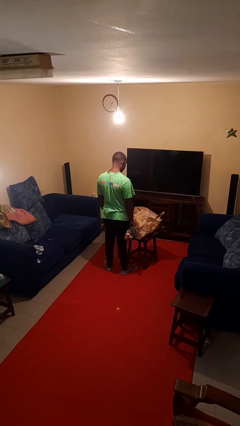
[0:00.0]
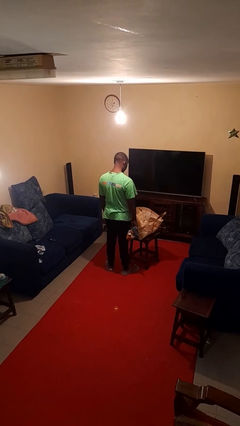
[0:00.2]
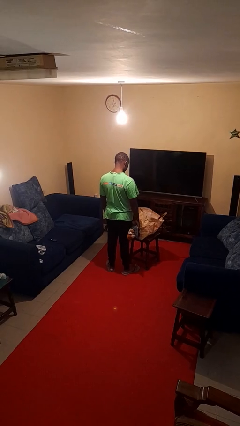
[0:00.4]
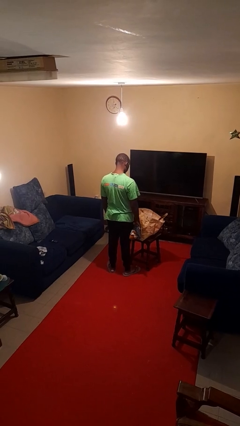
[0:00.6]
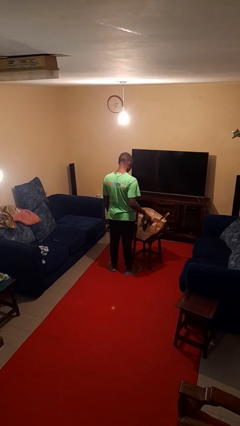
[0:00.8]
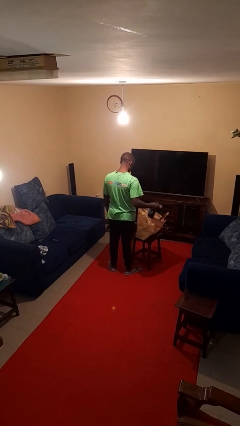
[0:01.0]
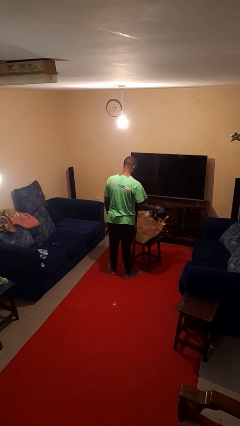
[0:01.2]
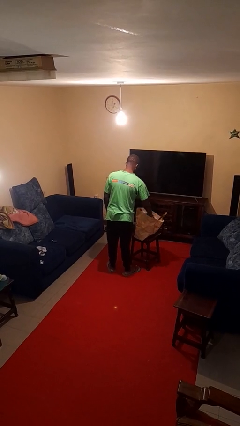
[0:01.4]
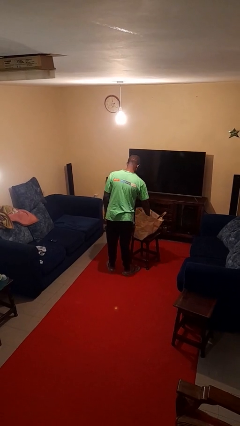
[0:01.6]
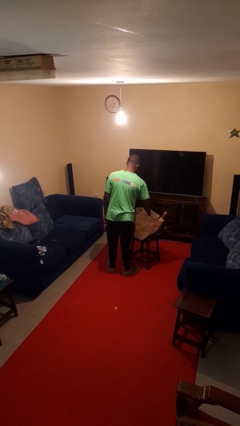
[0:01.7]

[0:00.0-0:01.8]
person puts object into bag

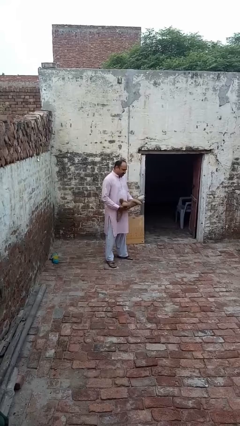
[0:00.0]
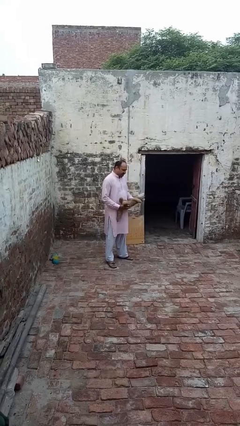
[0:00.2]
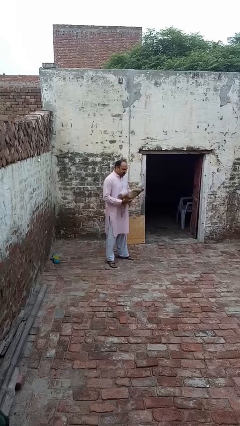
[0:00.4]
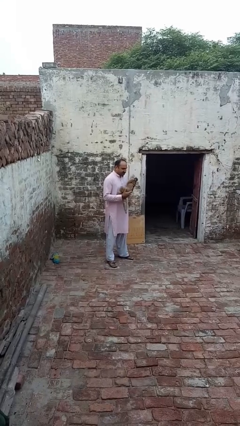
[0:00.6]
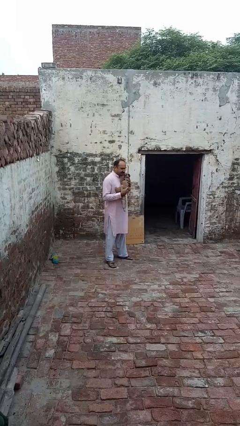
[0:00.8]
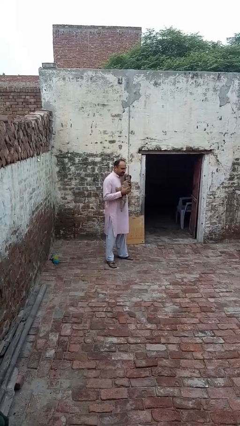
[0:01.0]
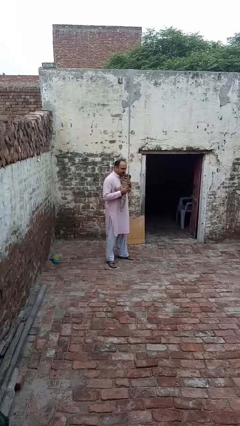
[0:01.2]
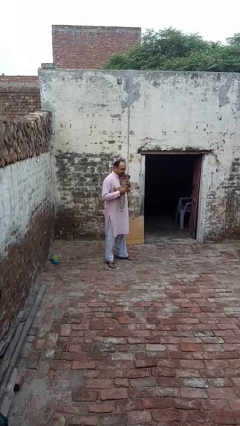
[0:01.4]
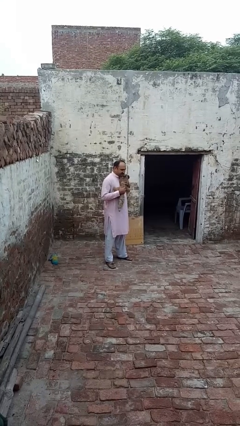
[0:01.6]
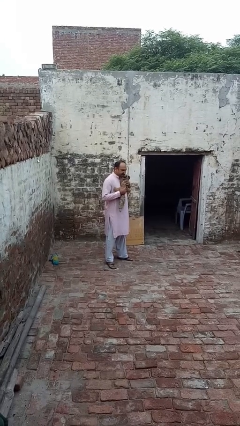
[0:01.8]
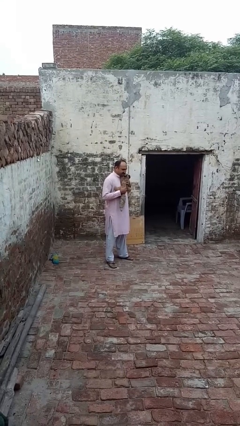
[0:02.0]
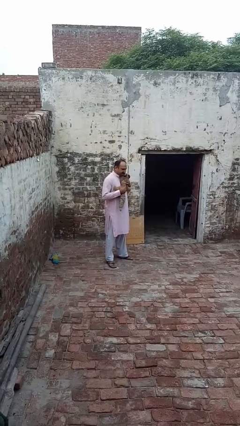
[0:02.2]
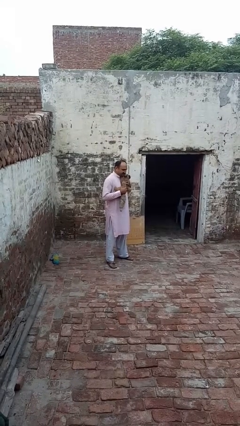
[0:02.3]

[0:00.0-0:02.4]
person hugs stuffed animal

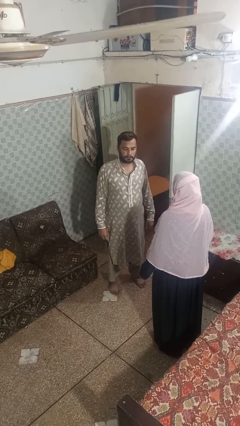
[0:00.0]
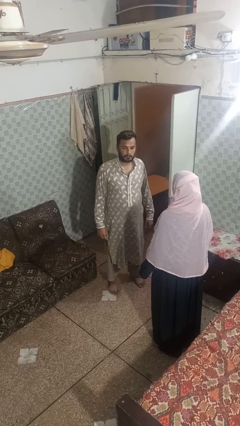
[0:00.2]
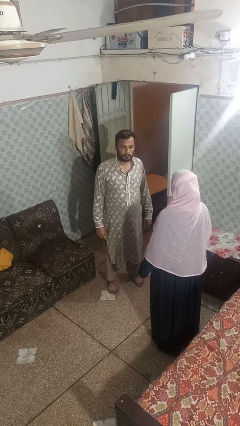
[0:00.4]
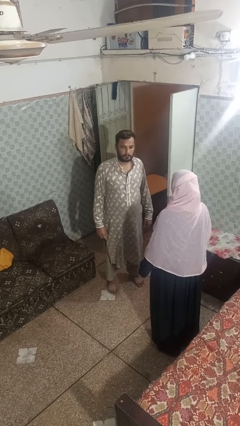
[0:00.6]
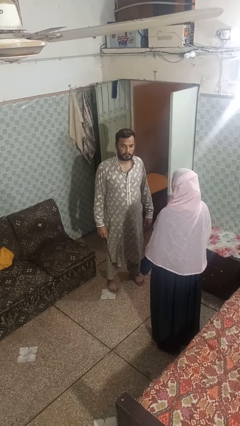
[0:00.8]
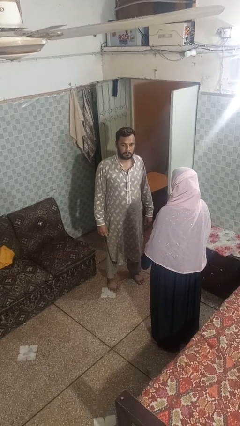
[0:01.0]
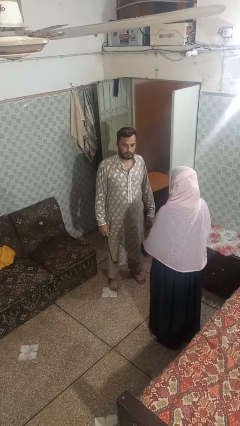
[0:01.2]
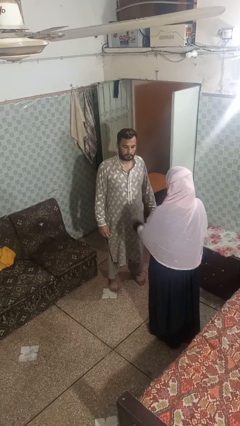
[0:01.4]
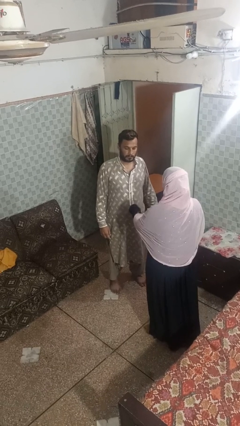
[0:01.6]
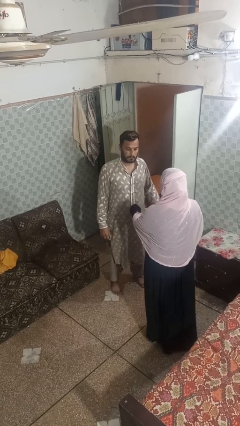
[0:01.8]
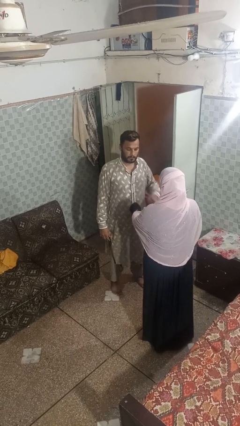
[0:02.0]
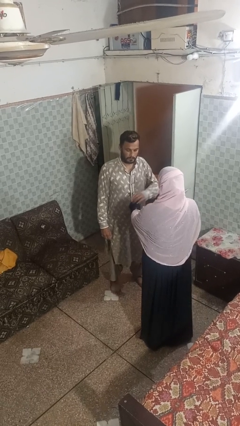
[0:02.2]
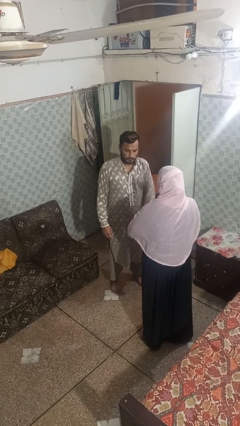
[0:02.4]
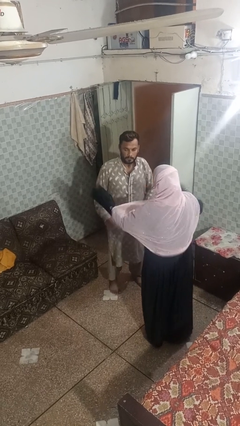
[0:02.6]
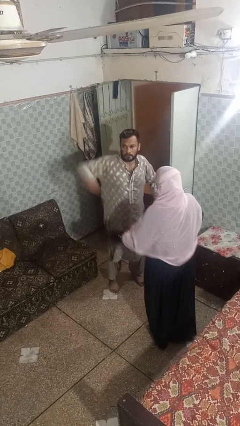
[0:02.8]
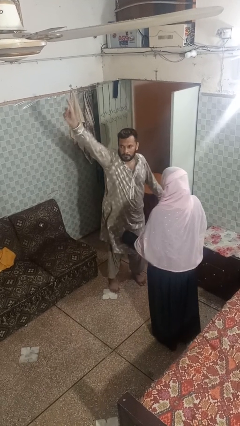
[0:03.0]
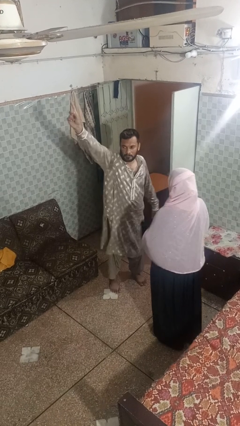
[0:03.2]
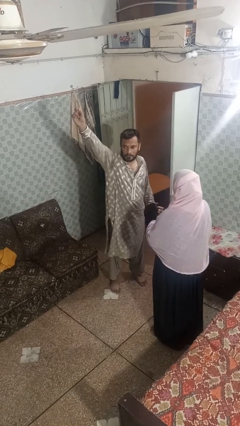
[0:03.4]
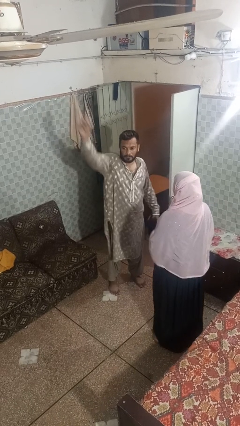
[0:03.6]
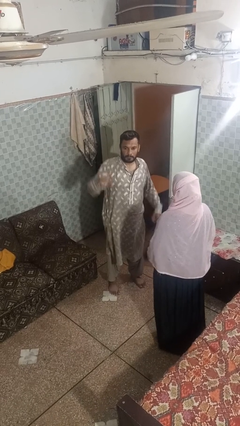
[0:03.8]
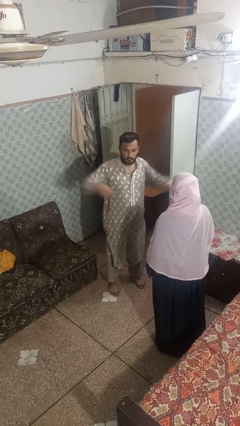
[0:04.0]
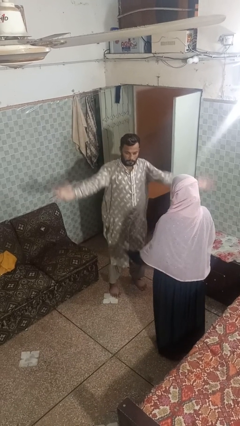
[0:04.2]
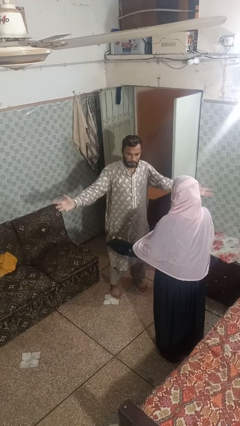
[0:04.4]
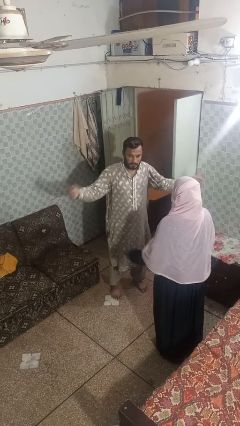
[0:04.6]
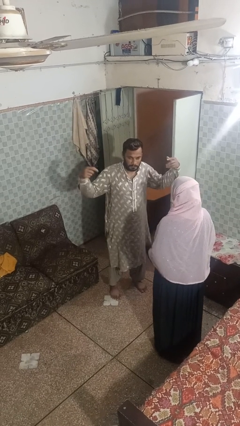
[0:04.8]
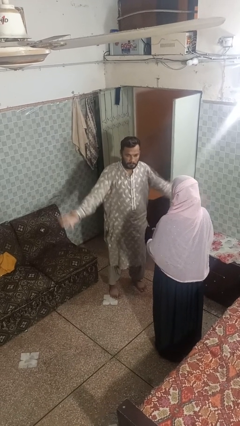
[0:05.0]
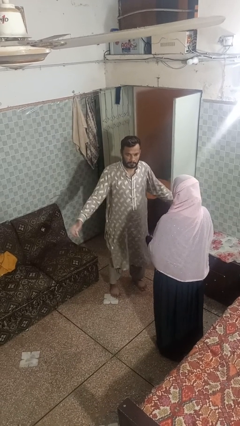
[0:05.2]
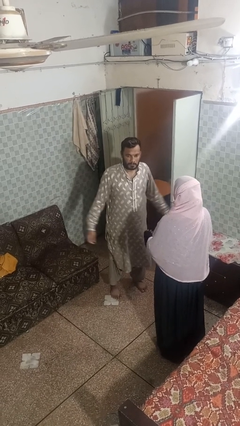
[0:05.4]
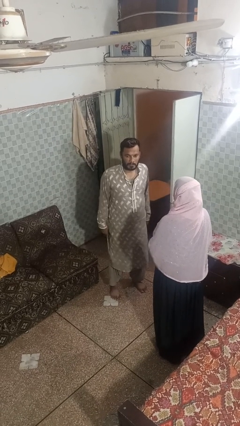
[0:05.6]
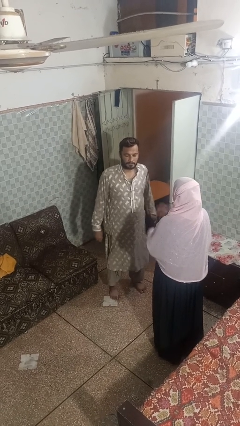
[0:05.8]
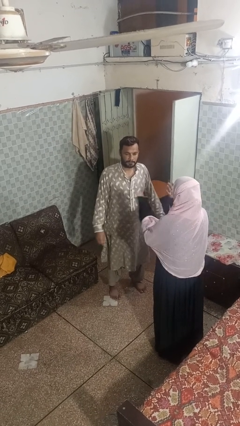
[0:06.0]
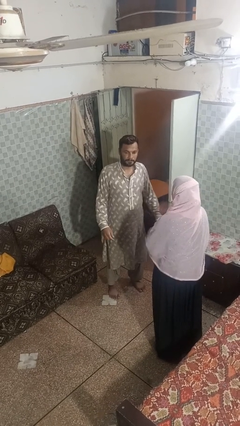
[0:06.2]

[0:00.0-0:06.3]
person shoves person

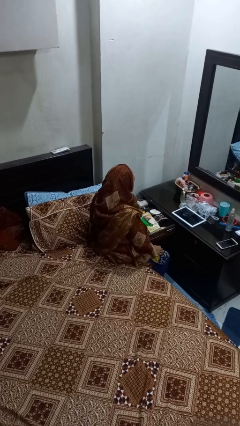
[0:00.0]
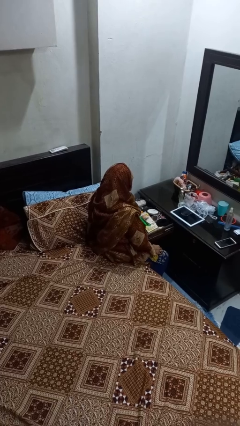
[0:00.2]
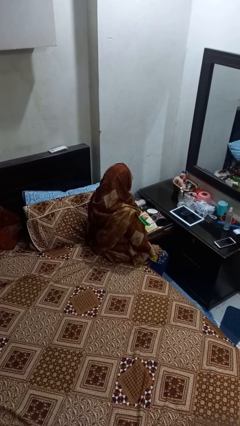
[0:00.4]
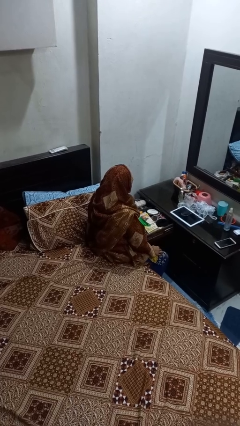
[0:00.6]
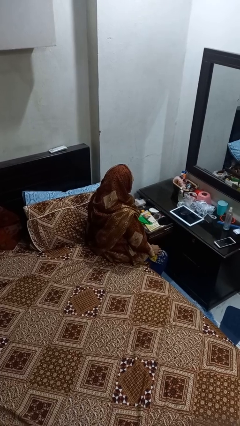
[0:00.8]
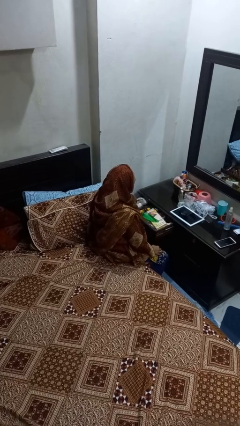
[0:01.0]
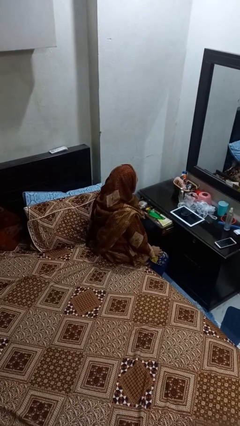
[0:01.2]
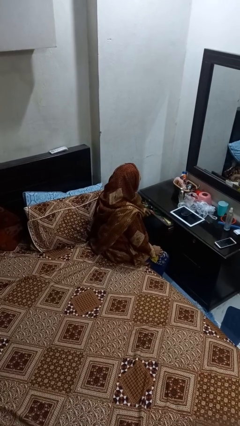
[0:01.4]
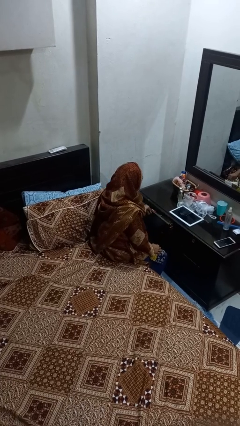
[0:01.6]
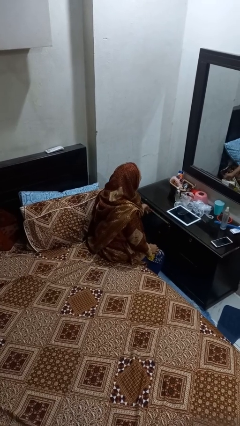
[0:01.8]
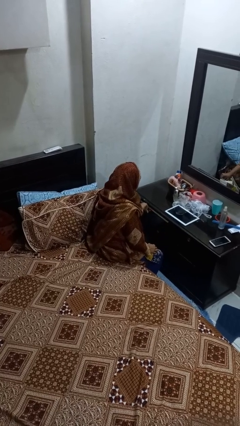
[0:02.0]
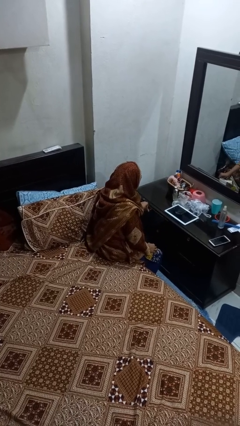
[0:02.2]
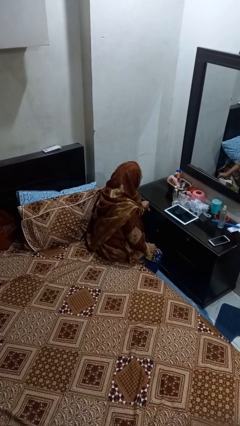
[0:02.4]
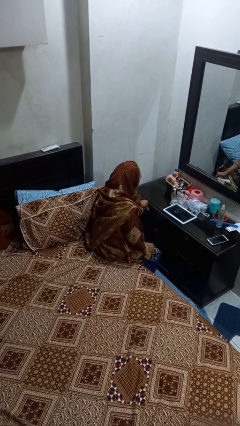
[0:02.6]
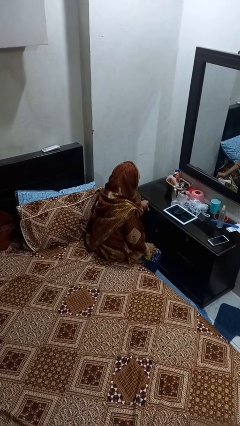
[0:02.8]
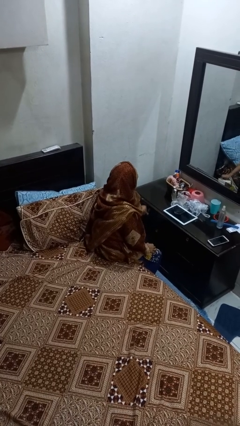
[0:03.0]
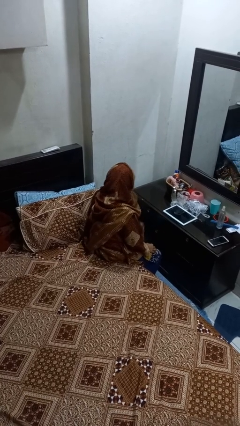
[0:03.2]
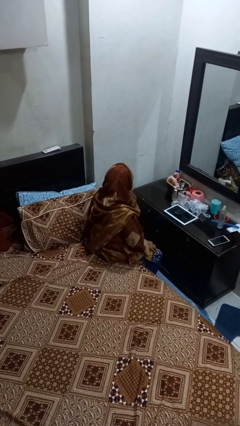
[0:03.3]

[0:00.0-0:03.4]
person closes dresser drawer

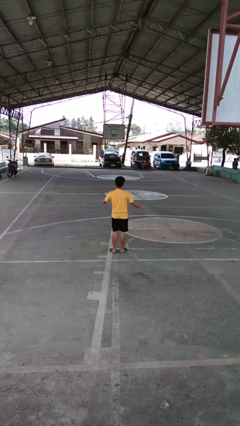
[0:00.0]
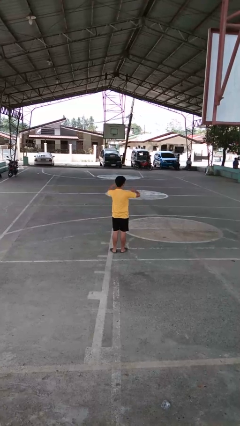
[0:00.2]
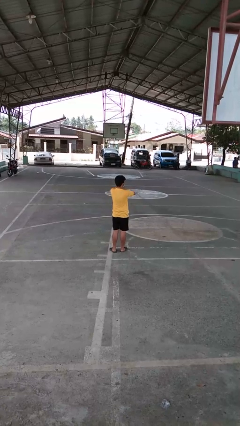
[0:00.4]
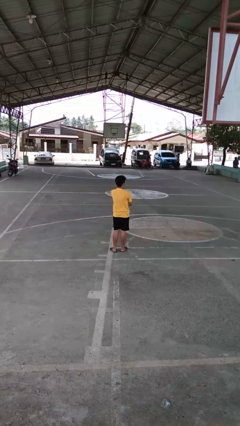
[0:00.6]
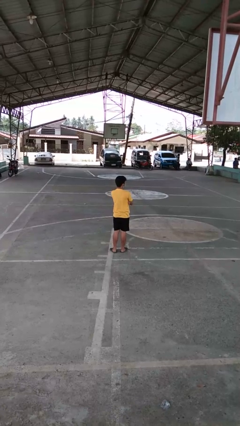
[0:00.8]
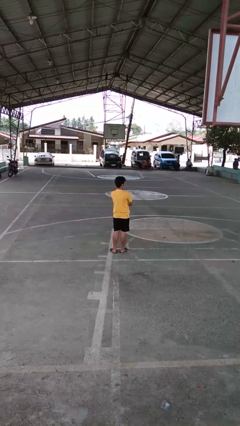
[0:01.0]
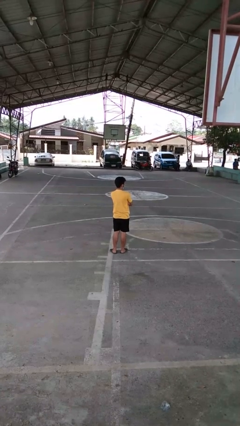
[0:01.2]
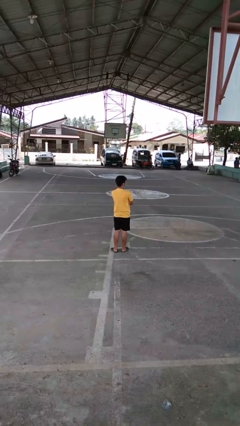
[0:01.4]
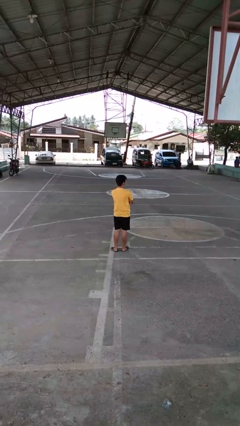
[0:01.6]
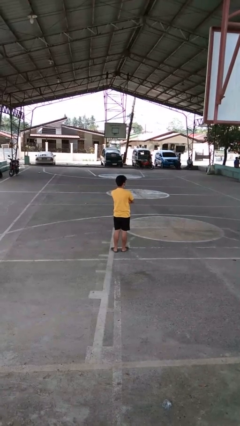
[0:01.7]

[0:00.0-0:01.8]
person crosses arms

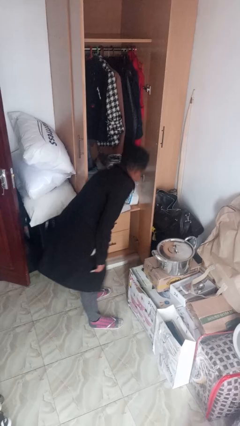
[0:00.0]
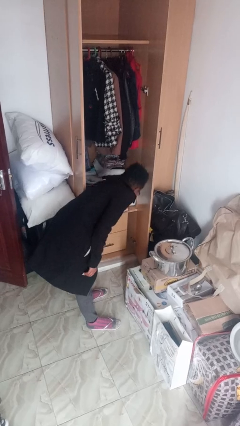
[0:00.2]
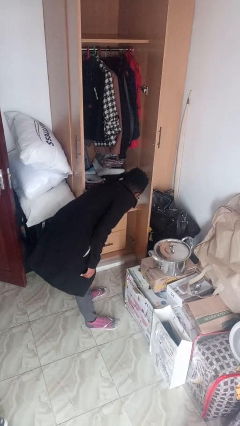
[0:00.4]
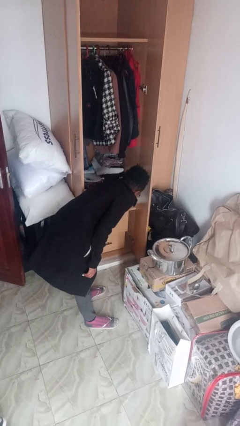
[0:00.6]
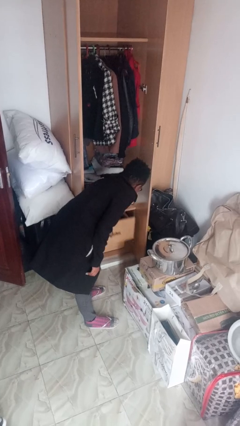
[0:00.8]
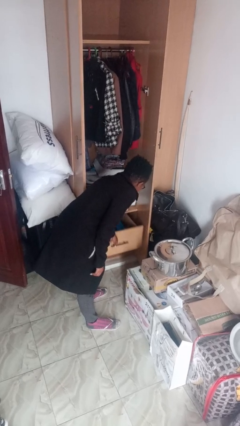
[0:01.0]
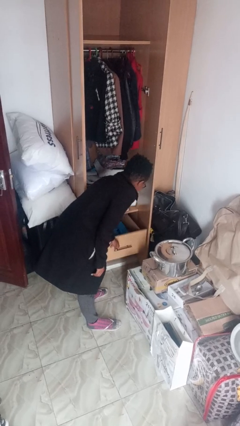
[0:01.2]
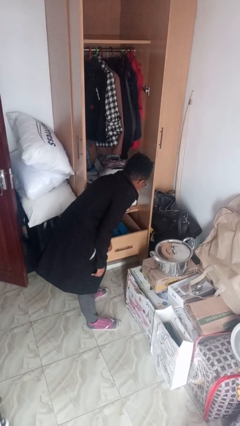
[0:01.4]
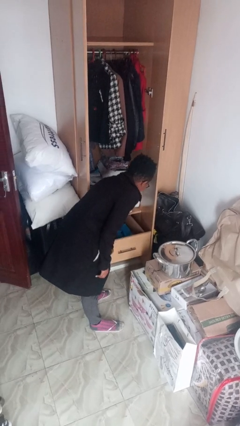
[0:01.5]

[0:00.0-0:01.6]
person opens dresser drawer

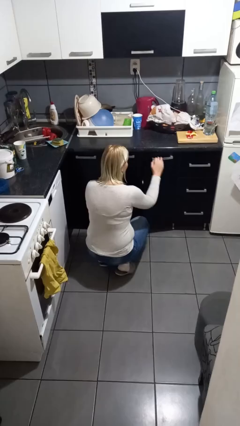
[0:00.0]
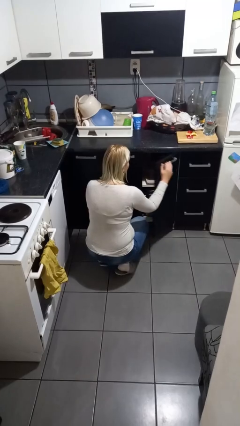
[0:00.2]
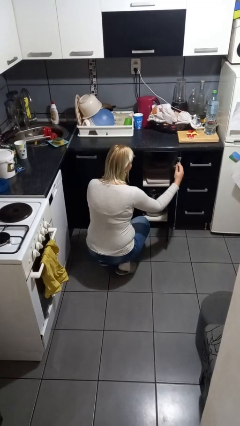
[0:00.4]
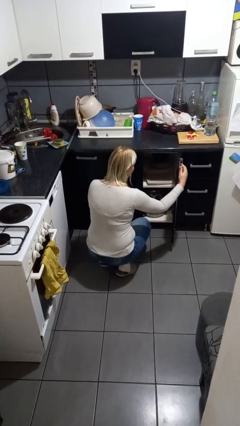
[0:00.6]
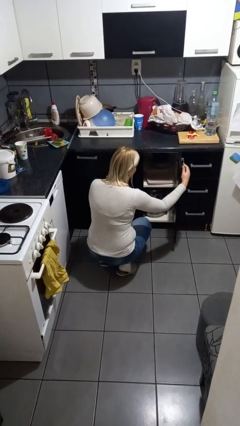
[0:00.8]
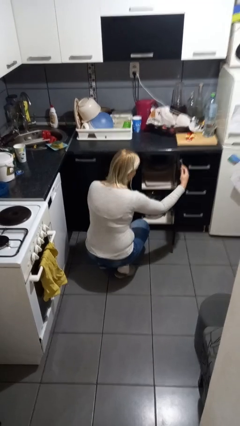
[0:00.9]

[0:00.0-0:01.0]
person opens cabinet
